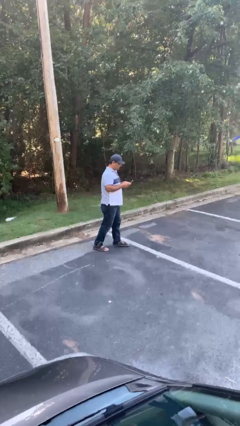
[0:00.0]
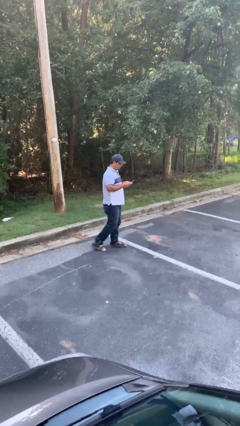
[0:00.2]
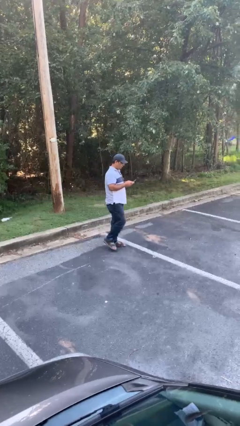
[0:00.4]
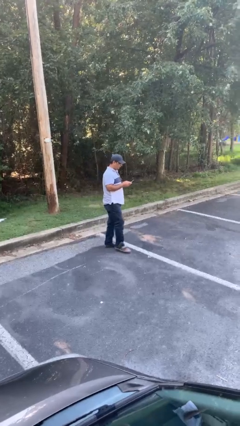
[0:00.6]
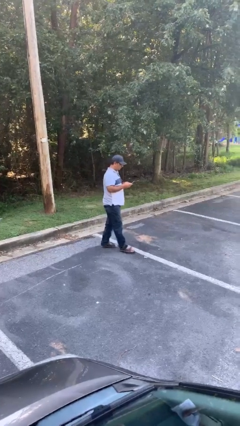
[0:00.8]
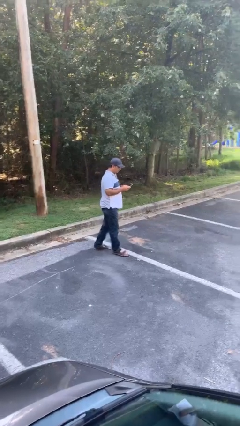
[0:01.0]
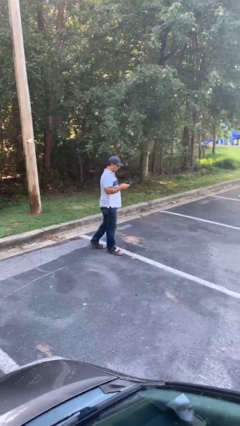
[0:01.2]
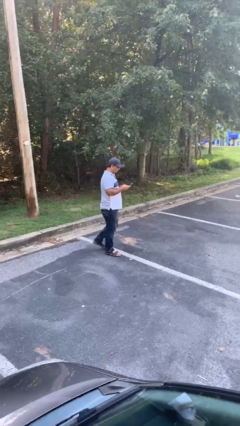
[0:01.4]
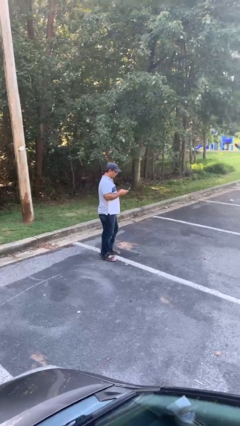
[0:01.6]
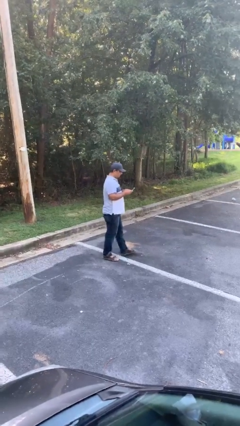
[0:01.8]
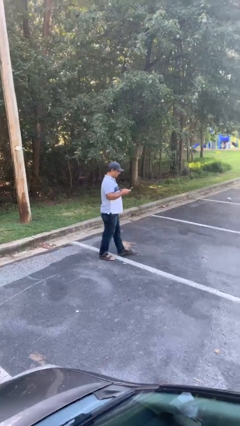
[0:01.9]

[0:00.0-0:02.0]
person texts on phone

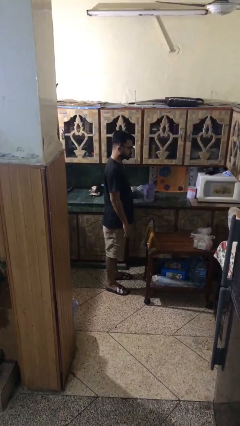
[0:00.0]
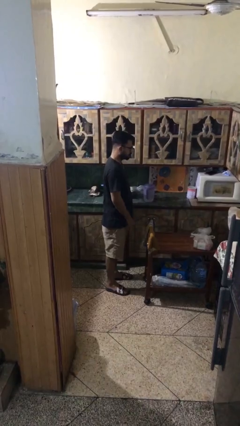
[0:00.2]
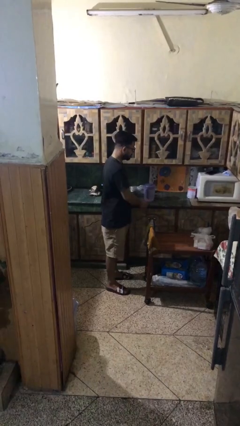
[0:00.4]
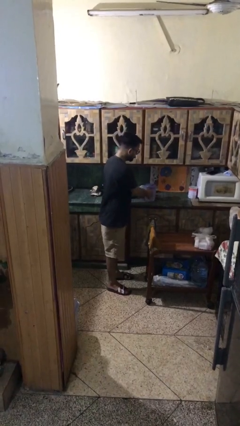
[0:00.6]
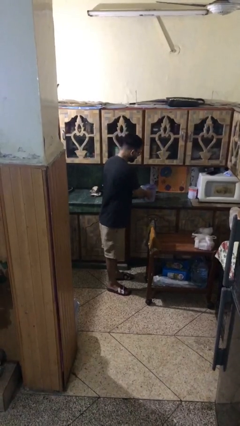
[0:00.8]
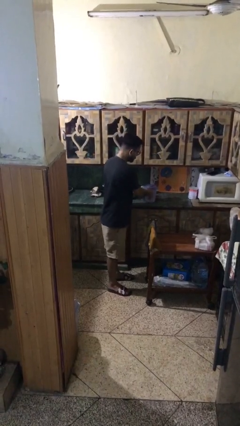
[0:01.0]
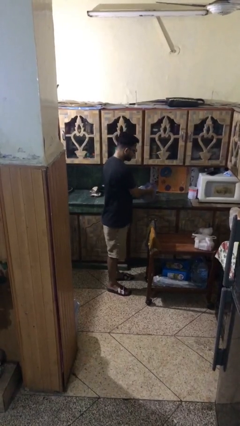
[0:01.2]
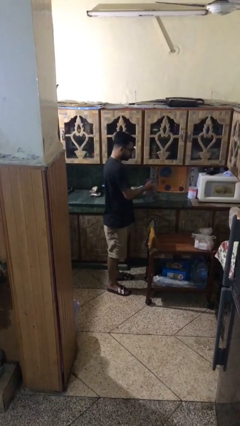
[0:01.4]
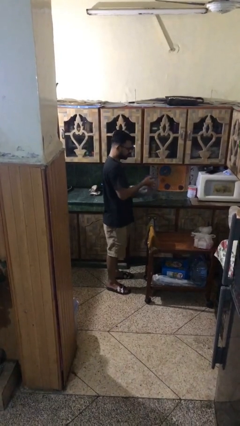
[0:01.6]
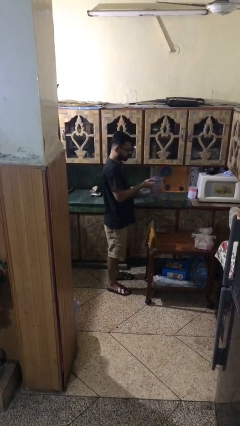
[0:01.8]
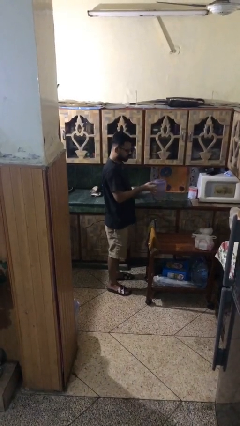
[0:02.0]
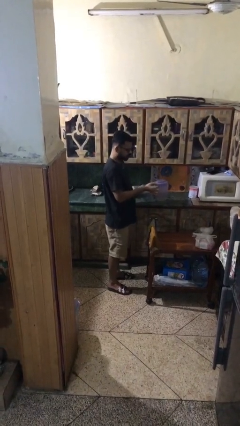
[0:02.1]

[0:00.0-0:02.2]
person picks up object from shelf

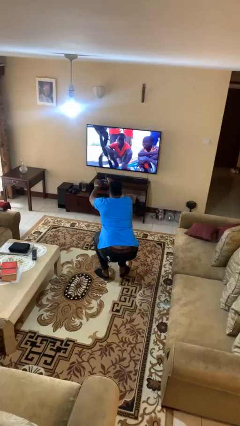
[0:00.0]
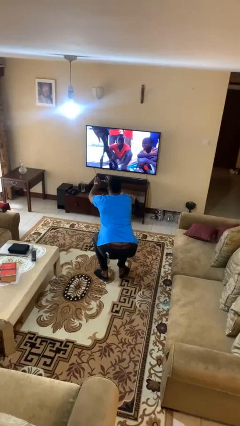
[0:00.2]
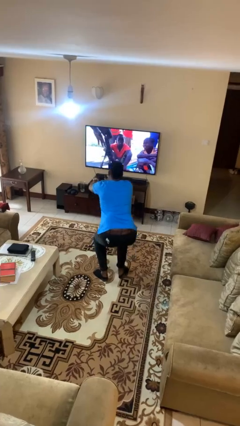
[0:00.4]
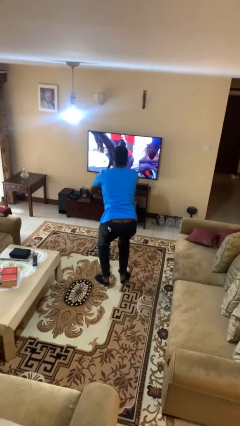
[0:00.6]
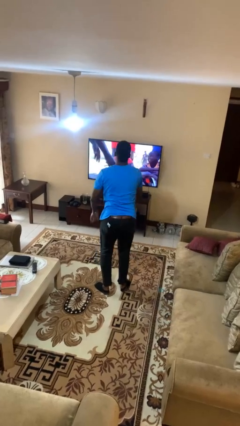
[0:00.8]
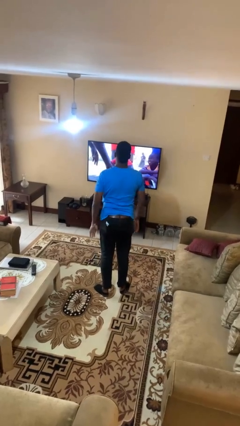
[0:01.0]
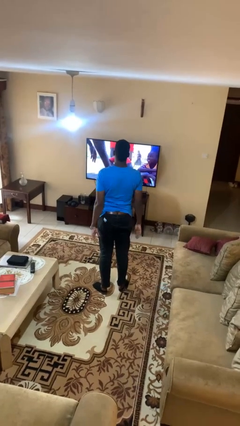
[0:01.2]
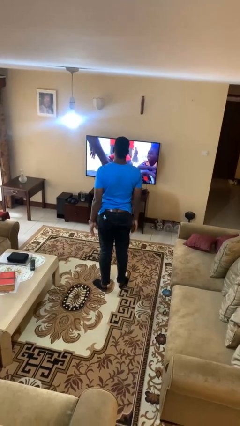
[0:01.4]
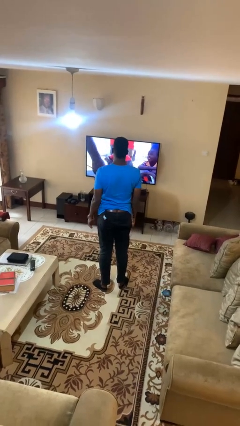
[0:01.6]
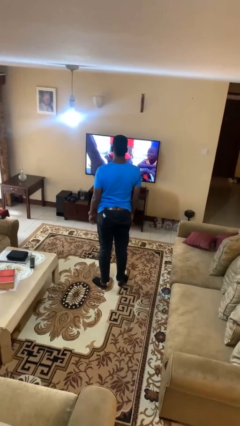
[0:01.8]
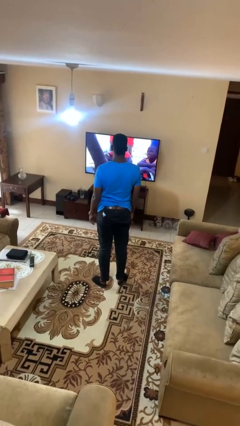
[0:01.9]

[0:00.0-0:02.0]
person stands up

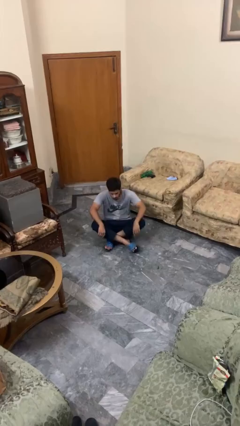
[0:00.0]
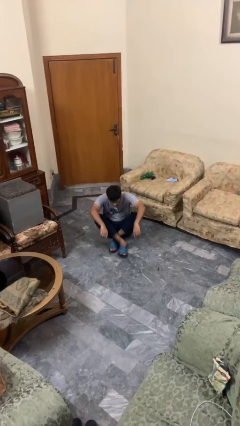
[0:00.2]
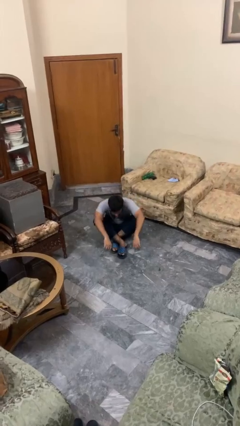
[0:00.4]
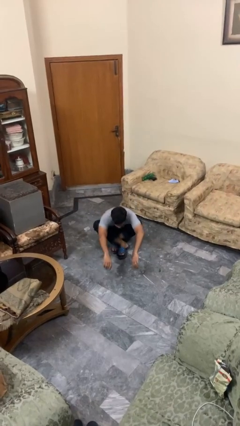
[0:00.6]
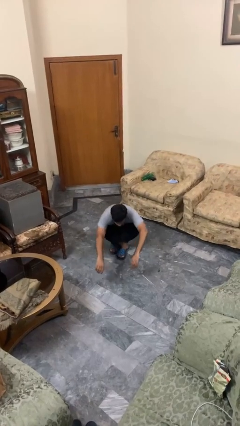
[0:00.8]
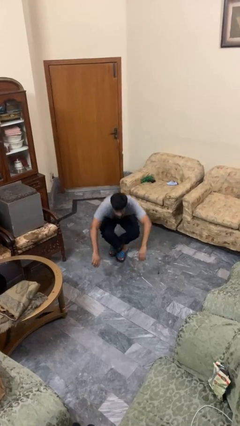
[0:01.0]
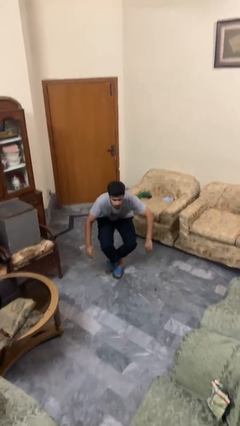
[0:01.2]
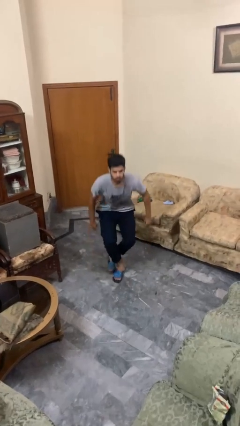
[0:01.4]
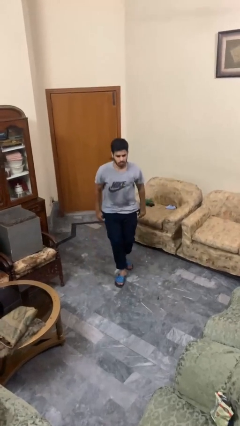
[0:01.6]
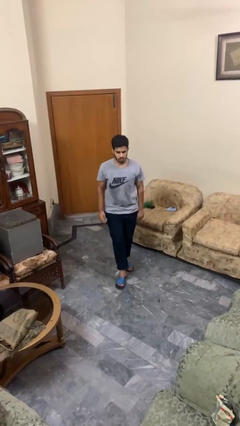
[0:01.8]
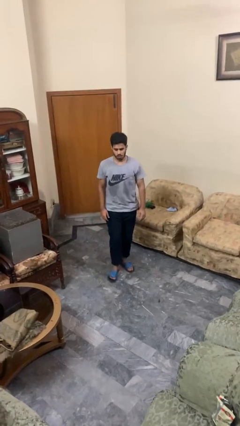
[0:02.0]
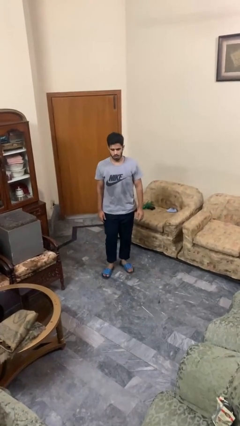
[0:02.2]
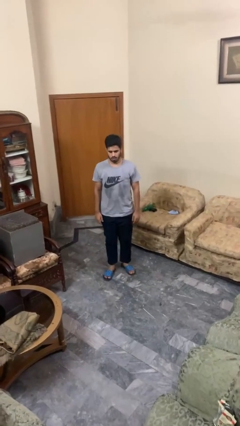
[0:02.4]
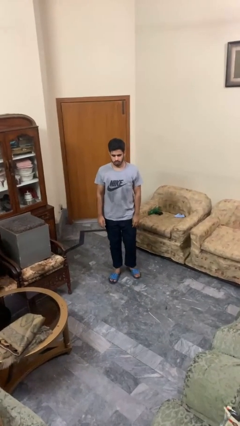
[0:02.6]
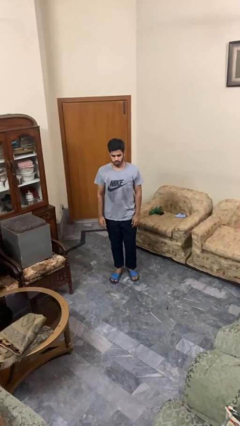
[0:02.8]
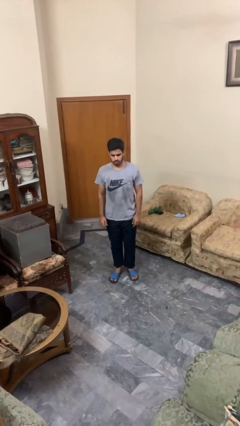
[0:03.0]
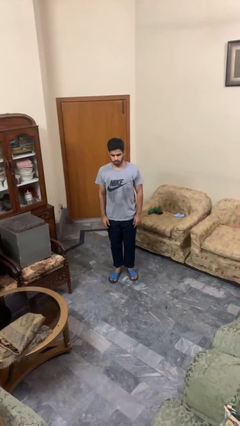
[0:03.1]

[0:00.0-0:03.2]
person stands up from floor

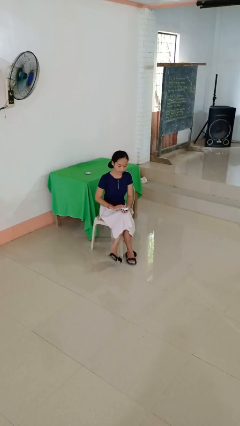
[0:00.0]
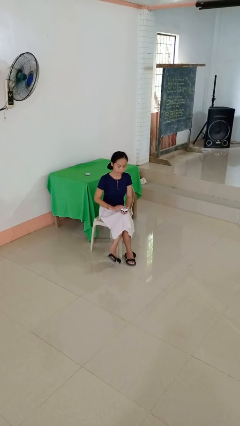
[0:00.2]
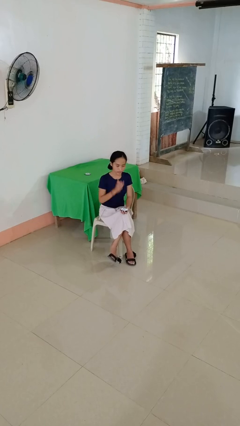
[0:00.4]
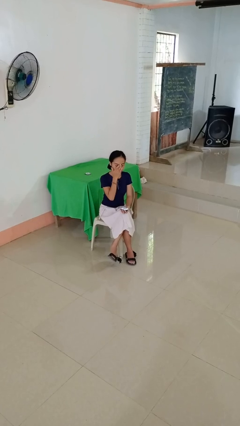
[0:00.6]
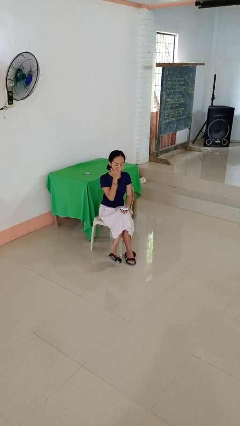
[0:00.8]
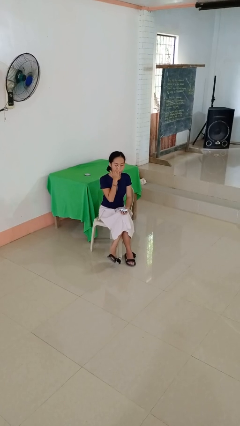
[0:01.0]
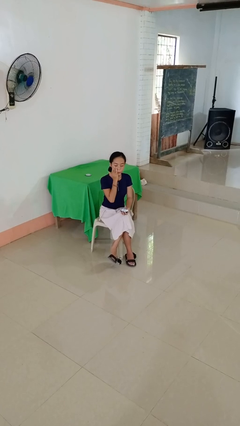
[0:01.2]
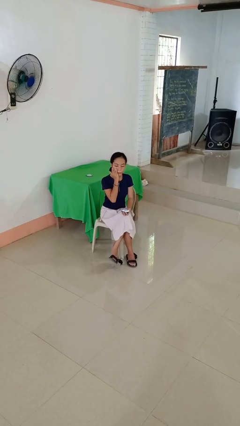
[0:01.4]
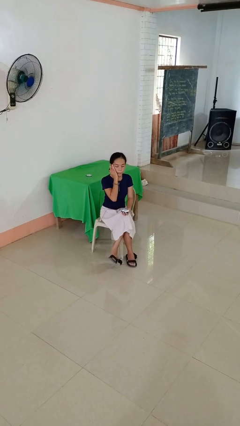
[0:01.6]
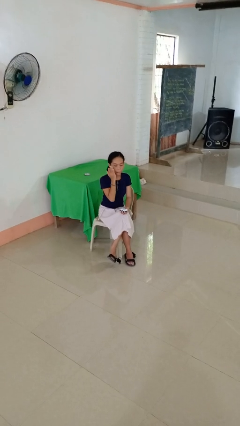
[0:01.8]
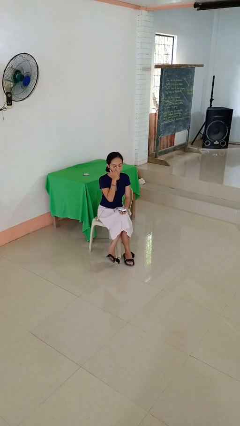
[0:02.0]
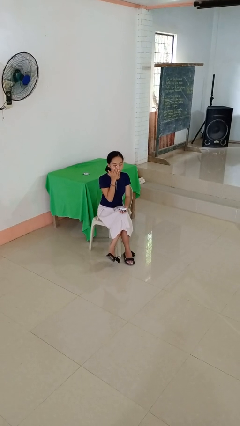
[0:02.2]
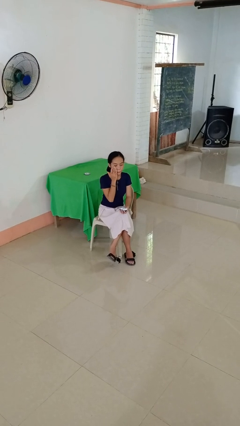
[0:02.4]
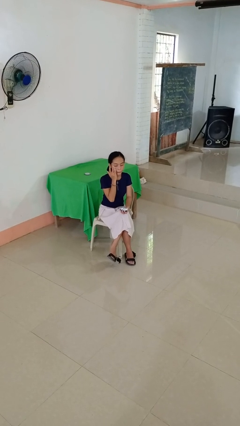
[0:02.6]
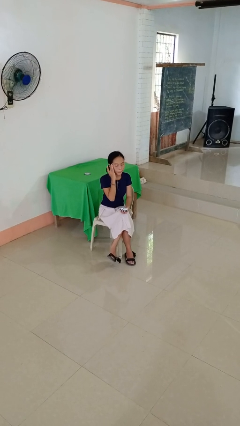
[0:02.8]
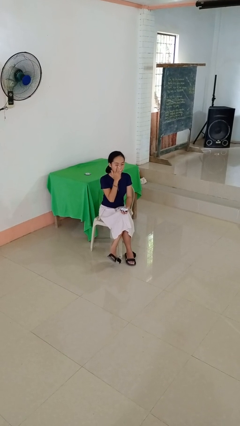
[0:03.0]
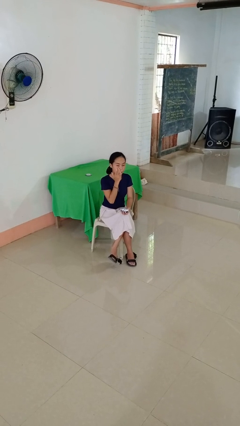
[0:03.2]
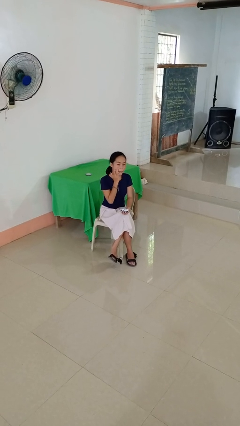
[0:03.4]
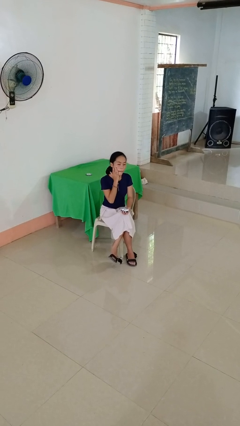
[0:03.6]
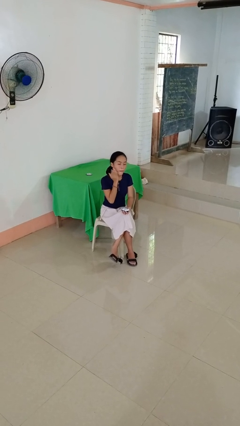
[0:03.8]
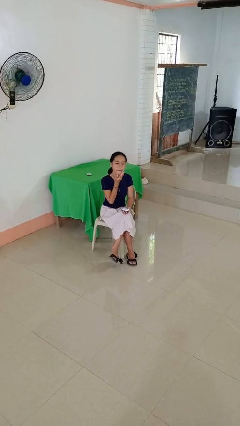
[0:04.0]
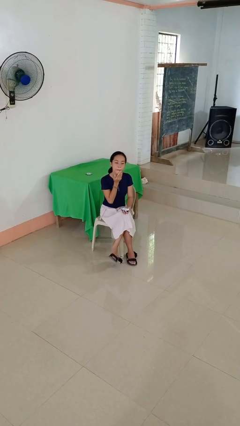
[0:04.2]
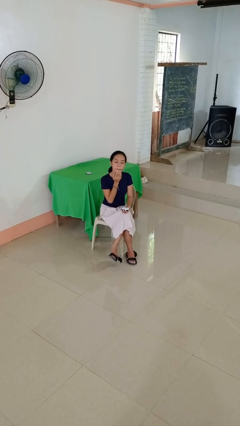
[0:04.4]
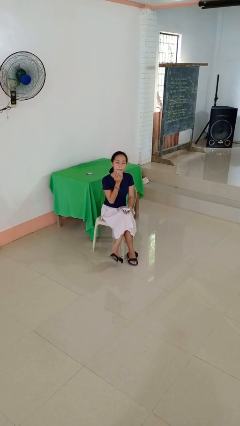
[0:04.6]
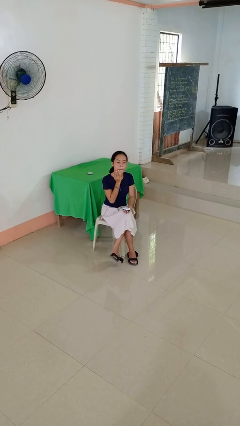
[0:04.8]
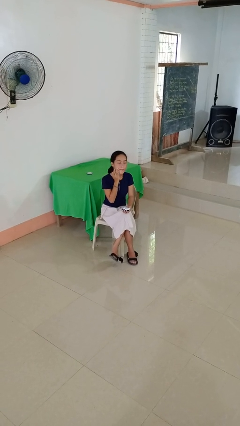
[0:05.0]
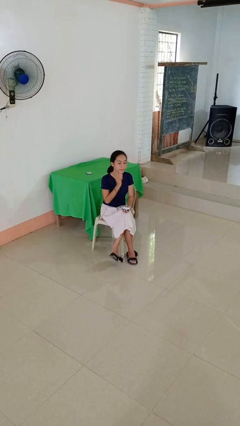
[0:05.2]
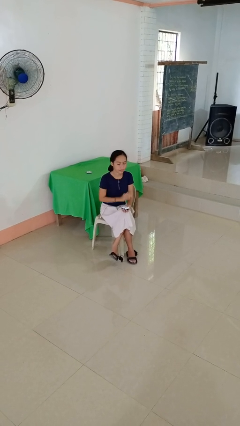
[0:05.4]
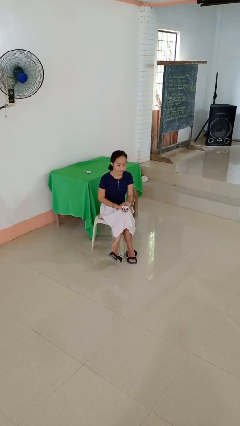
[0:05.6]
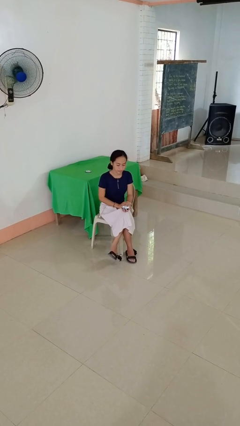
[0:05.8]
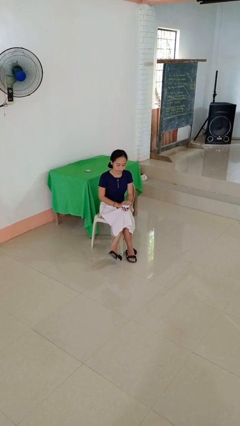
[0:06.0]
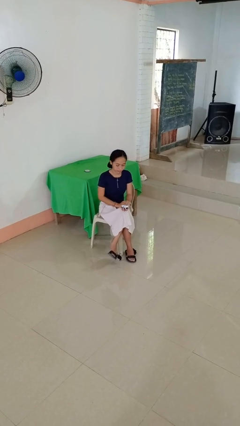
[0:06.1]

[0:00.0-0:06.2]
person applies facial moisturizer

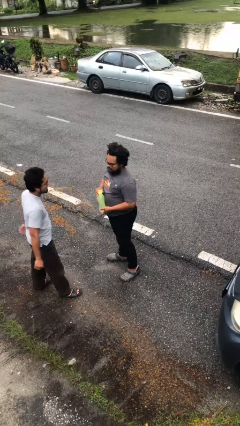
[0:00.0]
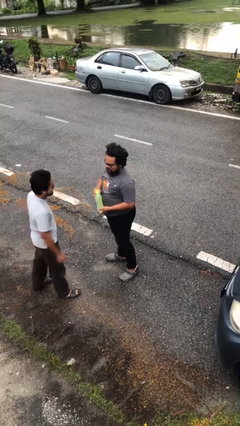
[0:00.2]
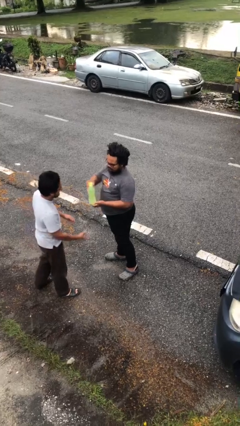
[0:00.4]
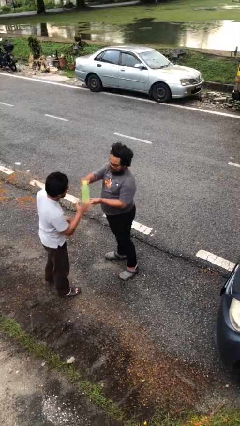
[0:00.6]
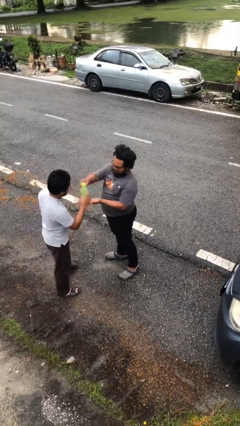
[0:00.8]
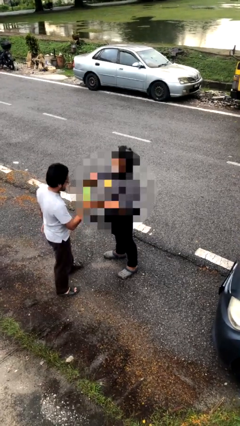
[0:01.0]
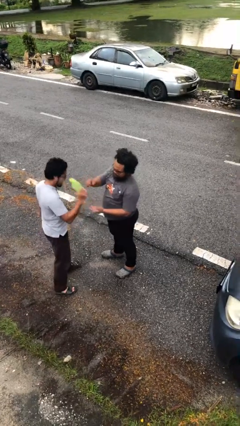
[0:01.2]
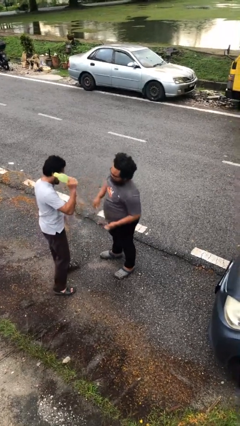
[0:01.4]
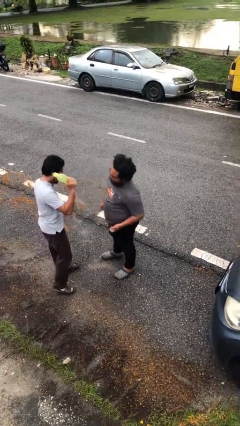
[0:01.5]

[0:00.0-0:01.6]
person transfers object to person
